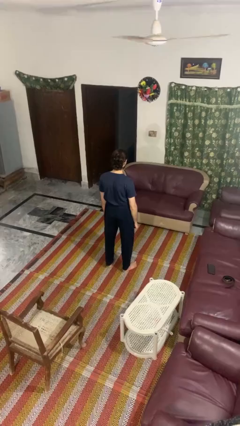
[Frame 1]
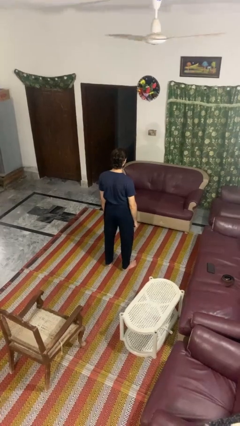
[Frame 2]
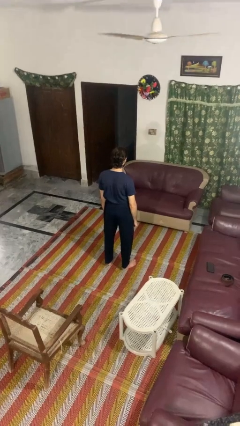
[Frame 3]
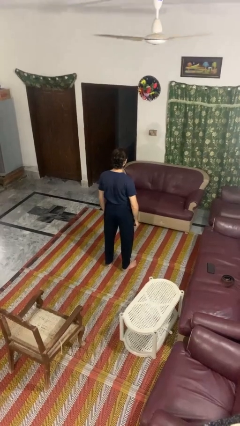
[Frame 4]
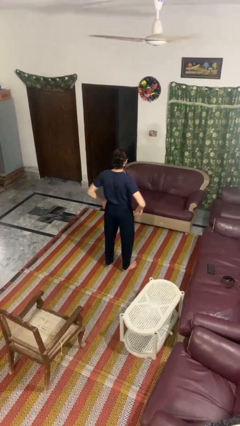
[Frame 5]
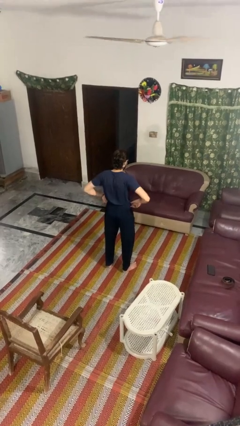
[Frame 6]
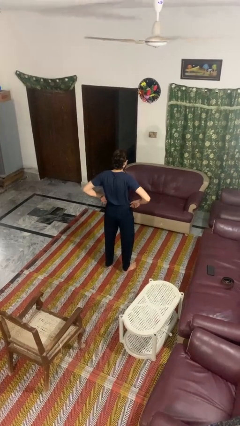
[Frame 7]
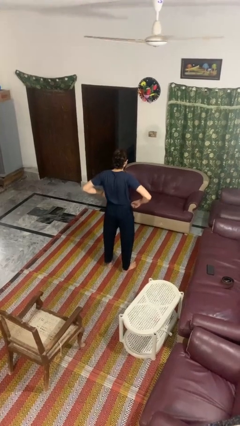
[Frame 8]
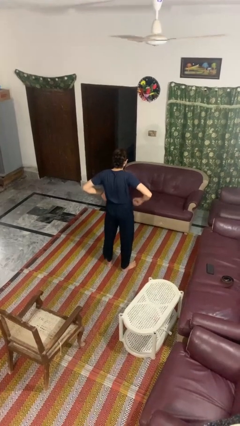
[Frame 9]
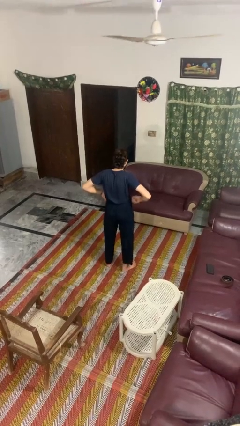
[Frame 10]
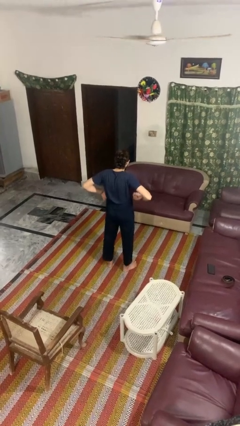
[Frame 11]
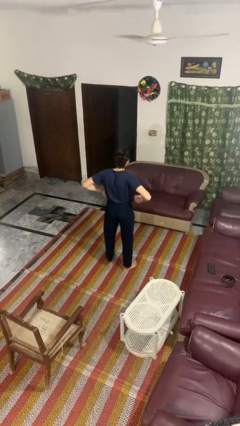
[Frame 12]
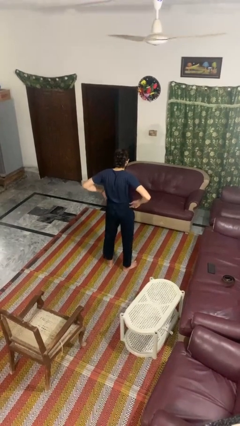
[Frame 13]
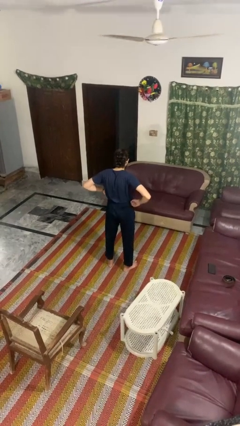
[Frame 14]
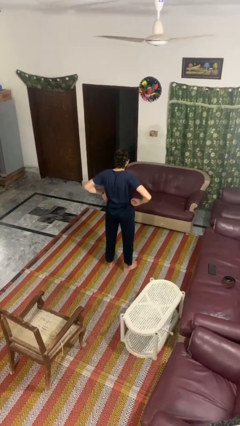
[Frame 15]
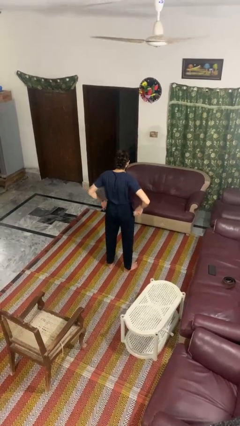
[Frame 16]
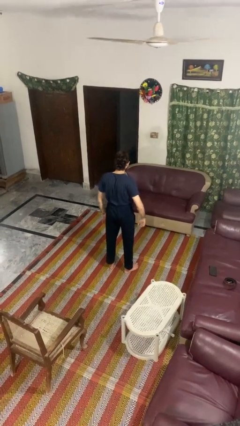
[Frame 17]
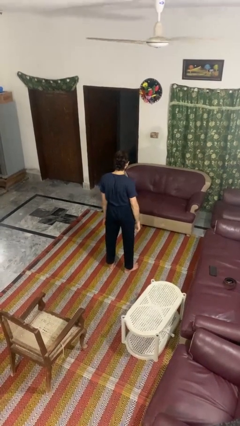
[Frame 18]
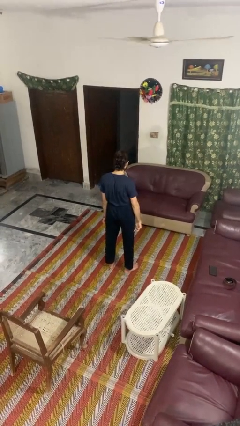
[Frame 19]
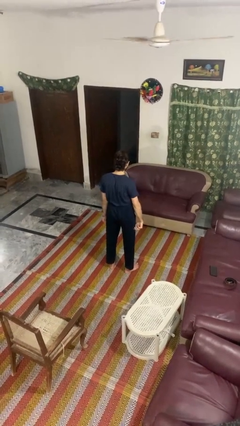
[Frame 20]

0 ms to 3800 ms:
person hikes up pants

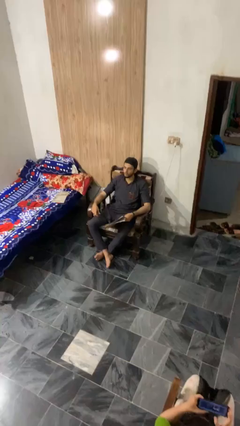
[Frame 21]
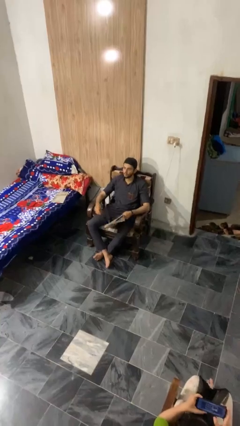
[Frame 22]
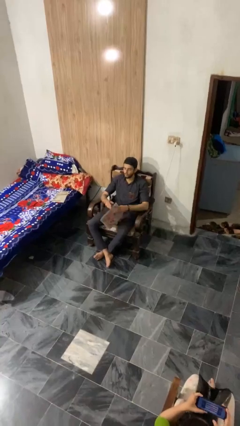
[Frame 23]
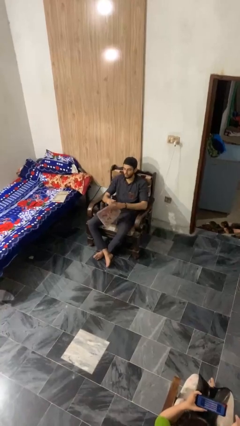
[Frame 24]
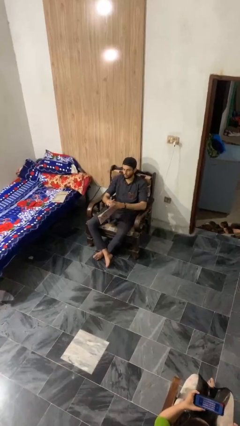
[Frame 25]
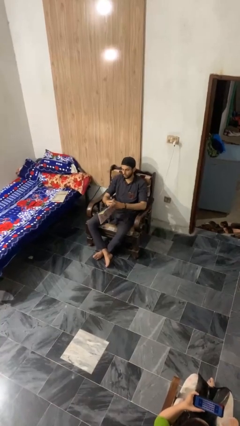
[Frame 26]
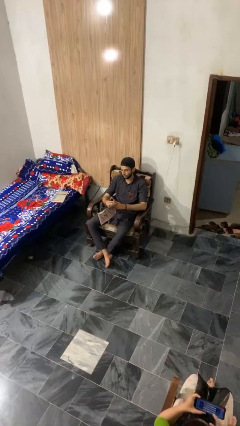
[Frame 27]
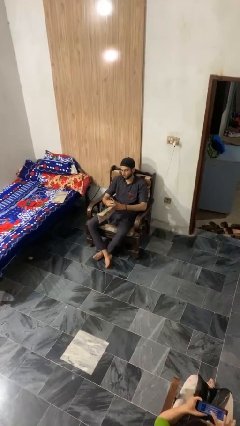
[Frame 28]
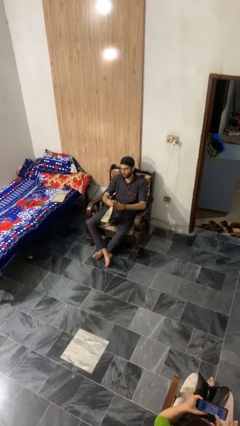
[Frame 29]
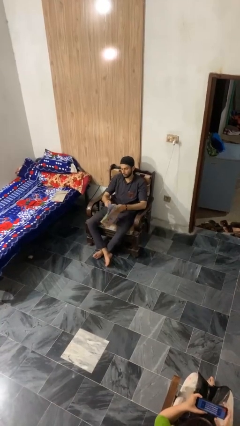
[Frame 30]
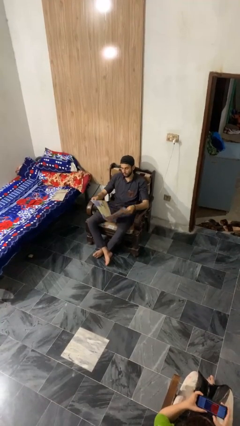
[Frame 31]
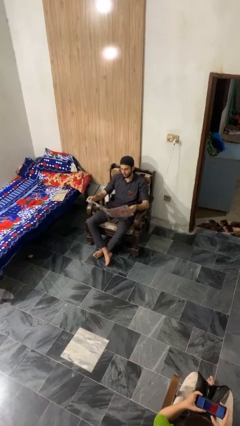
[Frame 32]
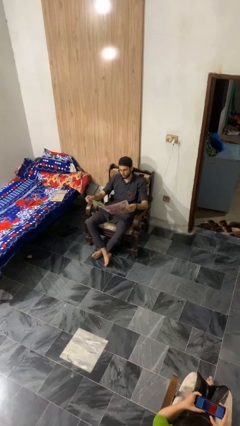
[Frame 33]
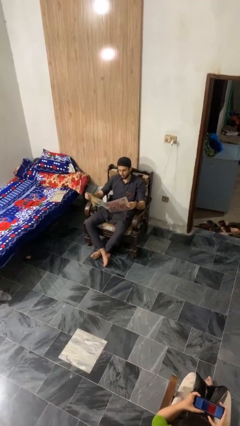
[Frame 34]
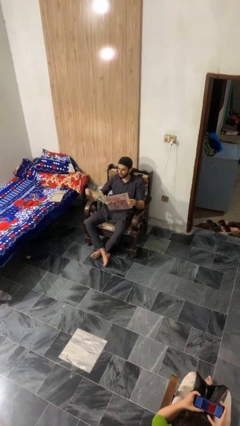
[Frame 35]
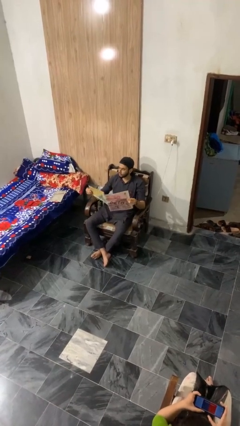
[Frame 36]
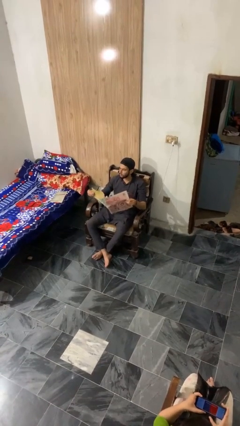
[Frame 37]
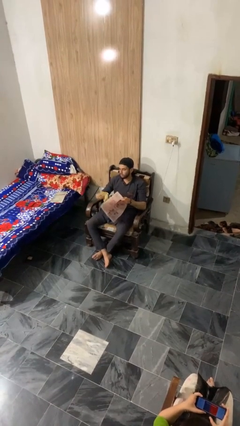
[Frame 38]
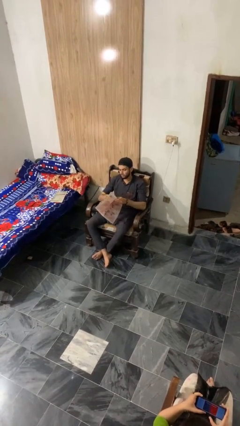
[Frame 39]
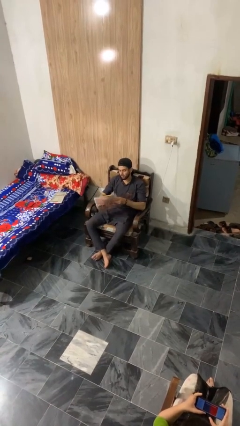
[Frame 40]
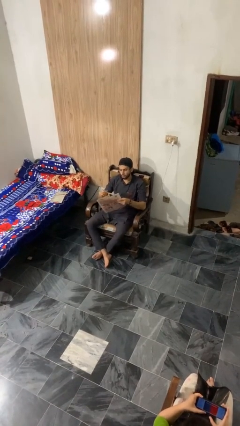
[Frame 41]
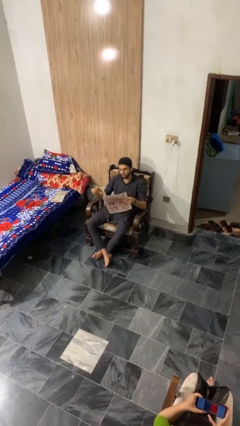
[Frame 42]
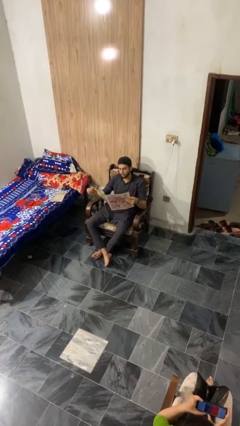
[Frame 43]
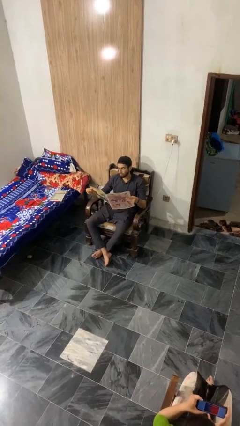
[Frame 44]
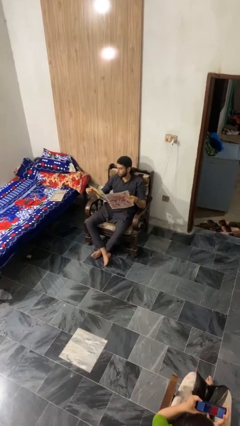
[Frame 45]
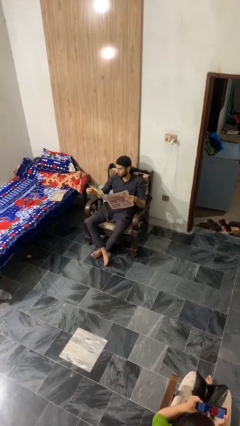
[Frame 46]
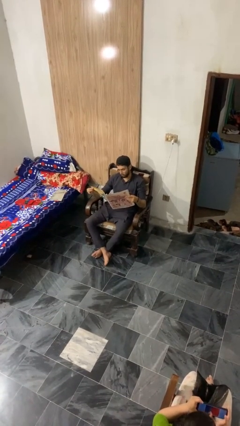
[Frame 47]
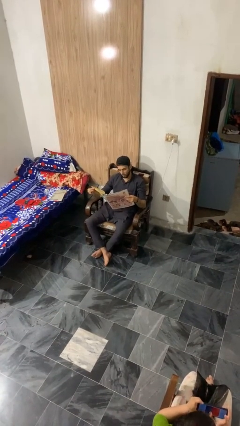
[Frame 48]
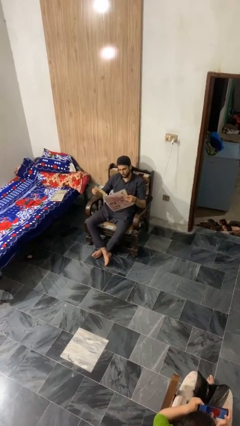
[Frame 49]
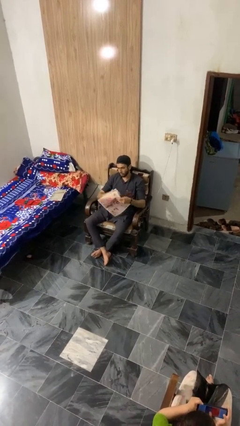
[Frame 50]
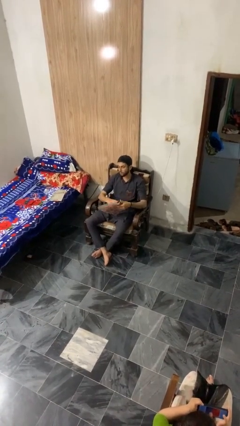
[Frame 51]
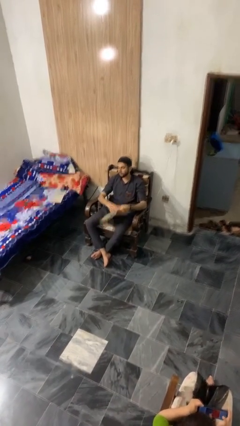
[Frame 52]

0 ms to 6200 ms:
person reads magazine

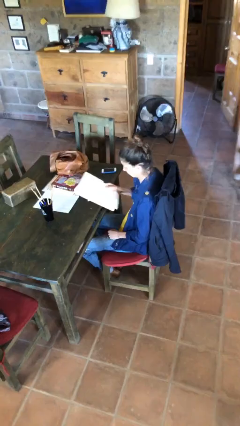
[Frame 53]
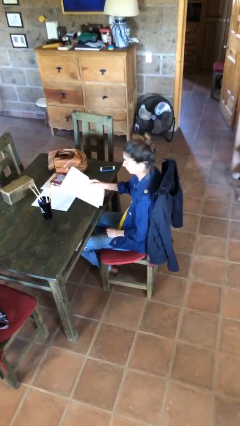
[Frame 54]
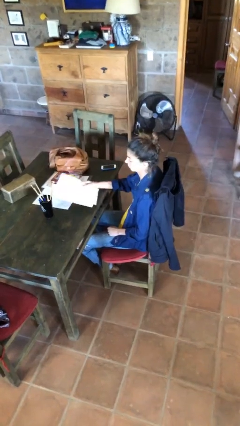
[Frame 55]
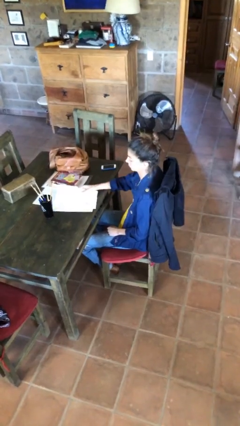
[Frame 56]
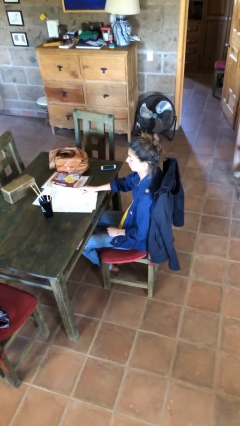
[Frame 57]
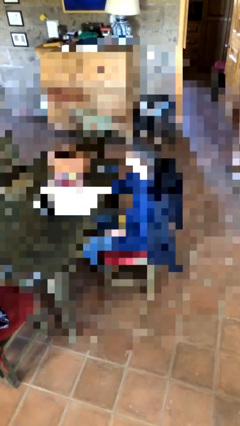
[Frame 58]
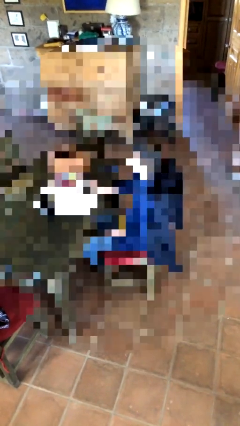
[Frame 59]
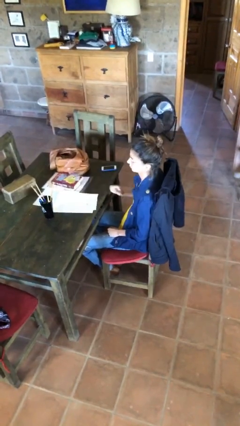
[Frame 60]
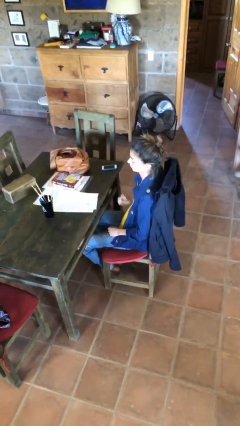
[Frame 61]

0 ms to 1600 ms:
person puts down object on table

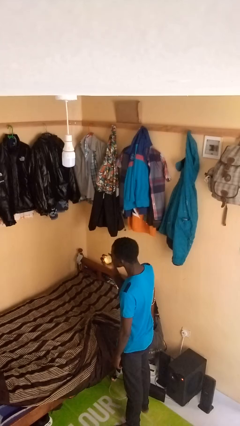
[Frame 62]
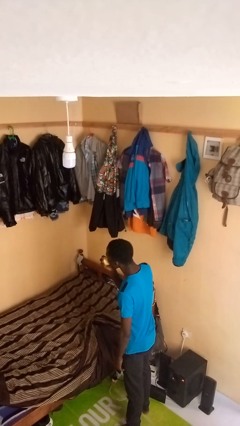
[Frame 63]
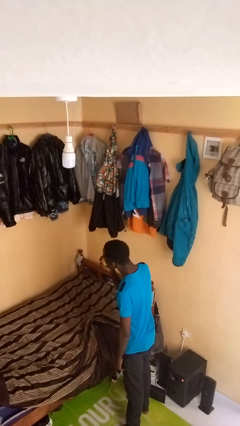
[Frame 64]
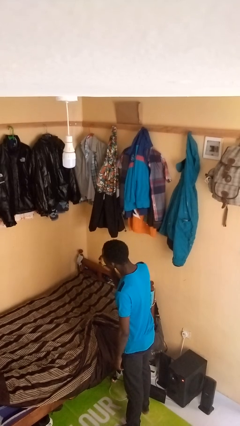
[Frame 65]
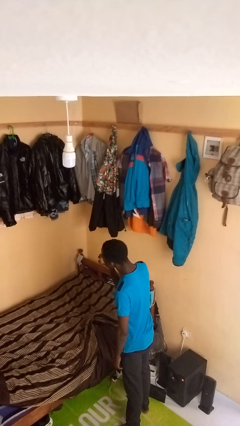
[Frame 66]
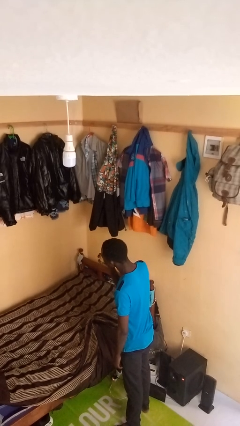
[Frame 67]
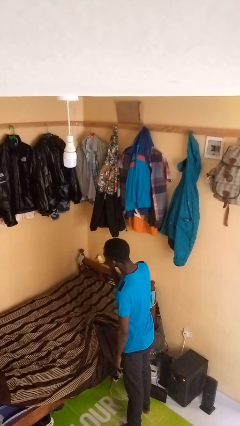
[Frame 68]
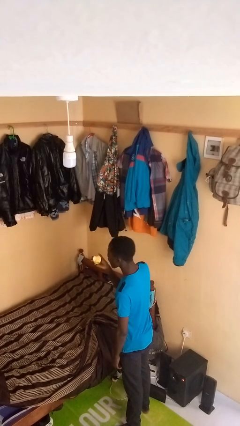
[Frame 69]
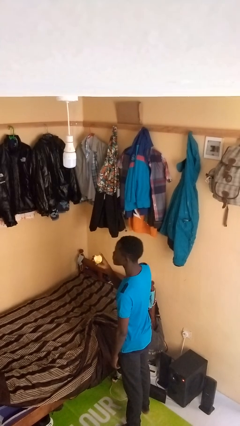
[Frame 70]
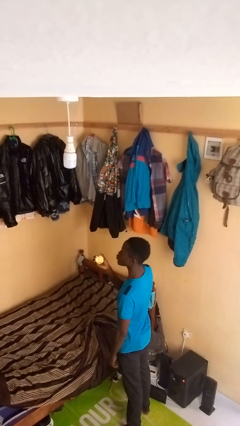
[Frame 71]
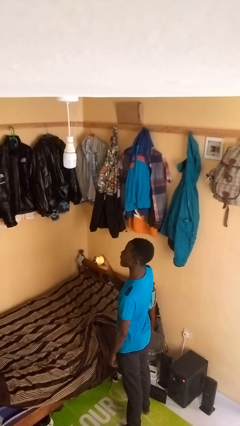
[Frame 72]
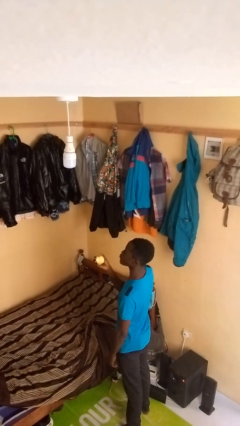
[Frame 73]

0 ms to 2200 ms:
person eats apple

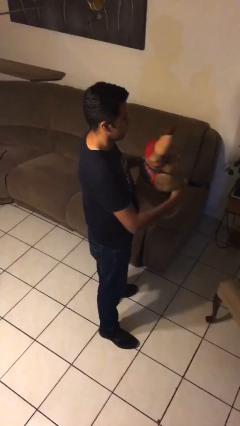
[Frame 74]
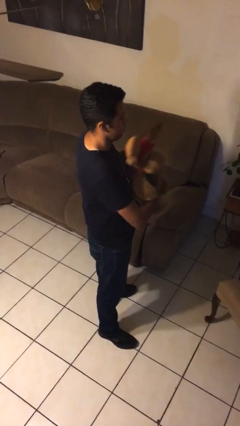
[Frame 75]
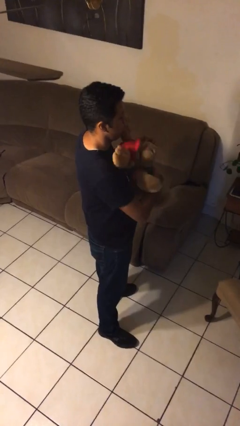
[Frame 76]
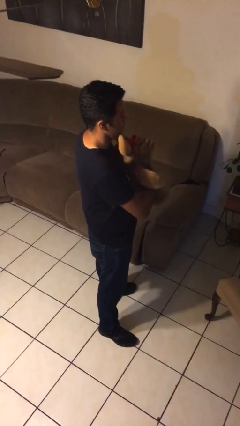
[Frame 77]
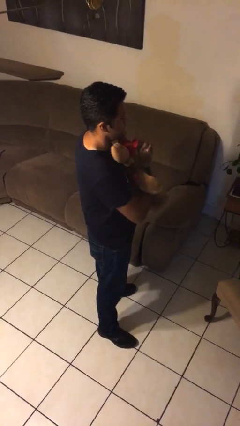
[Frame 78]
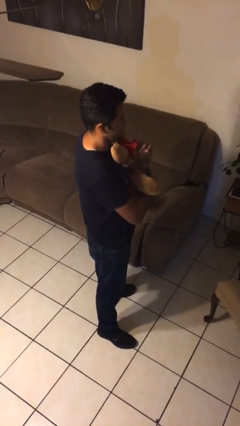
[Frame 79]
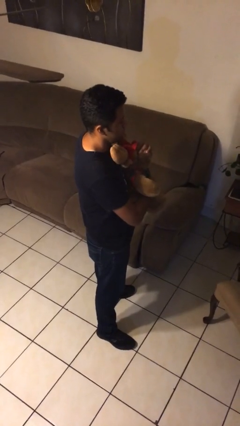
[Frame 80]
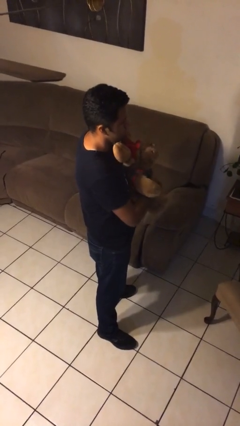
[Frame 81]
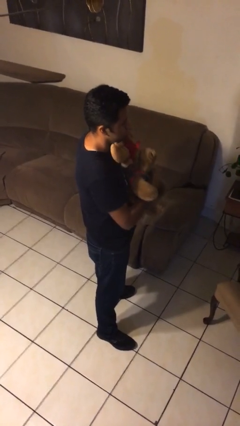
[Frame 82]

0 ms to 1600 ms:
person hugs stuffed animal

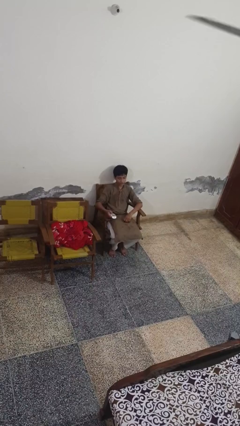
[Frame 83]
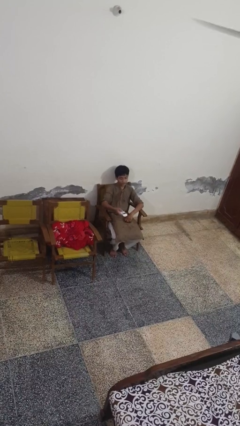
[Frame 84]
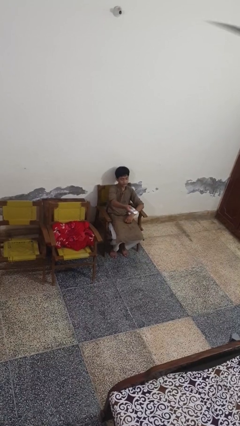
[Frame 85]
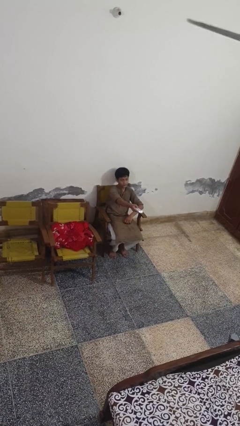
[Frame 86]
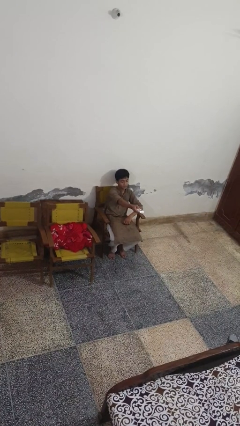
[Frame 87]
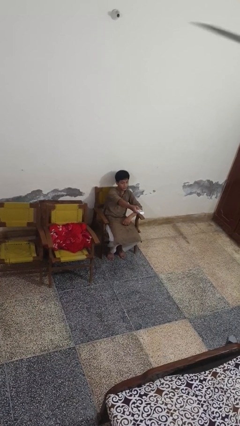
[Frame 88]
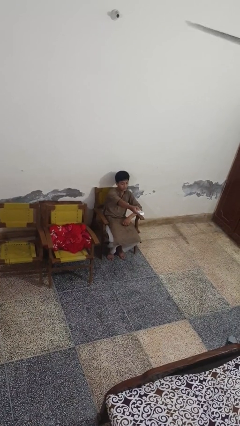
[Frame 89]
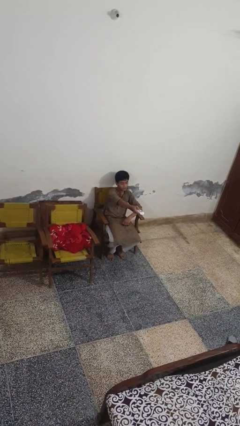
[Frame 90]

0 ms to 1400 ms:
person uses television remote
